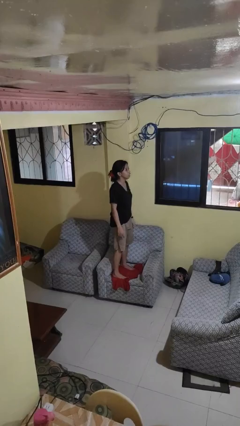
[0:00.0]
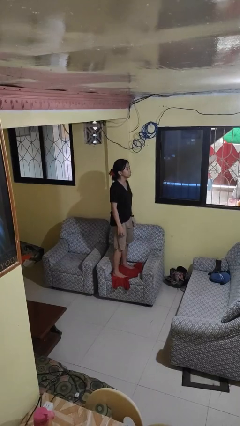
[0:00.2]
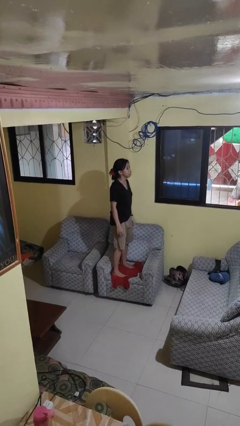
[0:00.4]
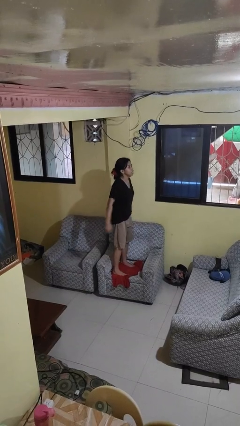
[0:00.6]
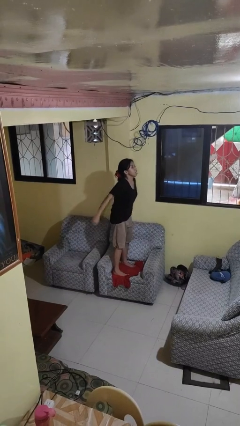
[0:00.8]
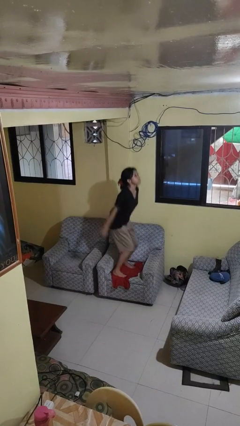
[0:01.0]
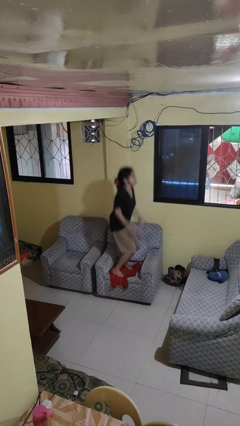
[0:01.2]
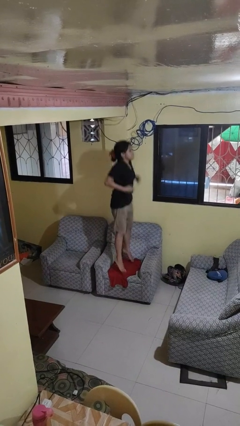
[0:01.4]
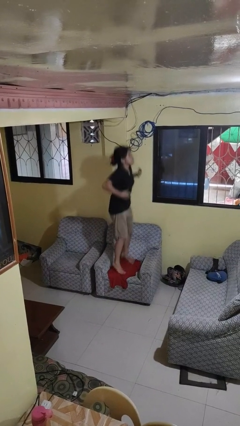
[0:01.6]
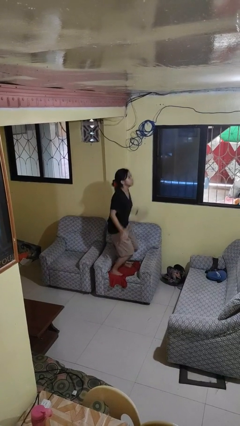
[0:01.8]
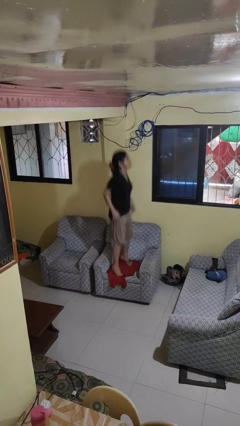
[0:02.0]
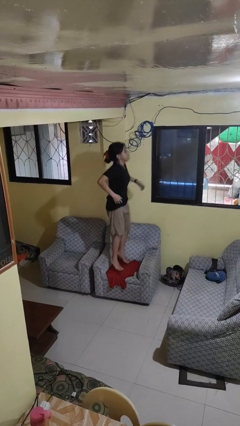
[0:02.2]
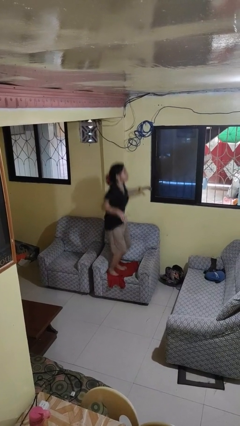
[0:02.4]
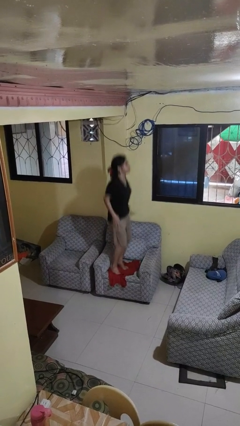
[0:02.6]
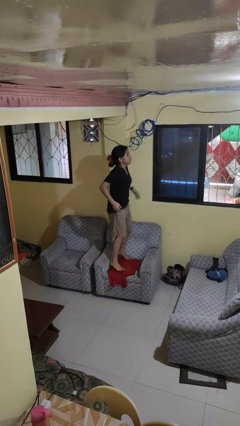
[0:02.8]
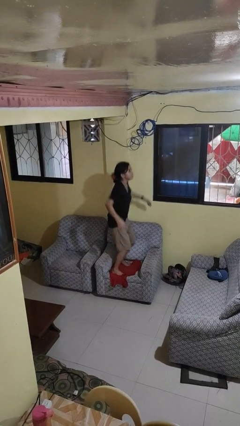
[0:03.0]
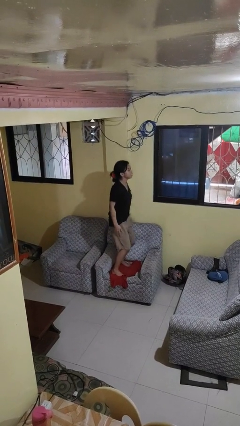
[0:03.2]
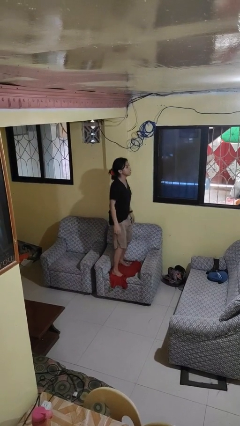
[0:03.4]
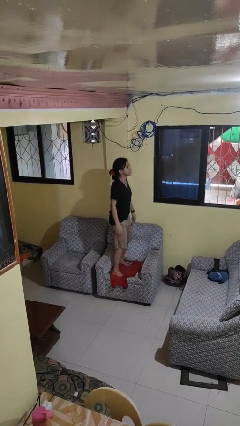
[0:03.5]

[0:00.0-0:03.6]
person jumps on couch

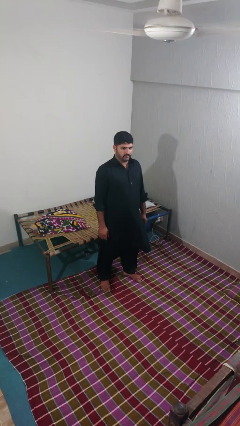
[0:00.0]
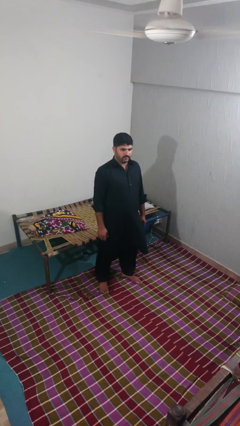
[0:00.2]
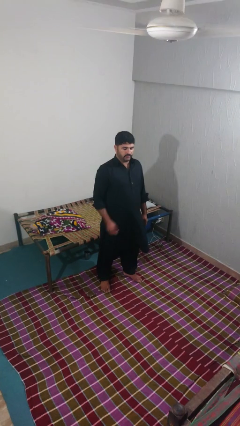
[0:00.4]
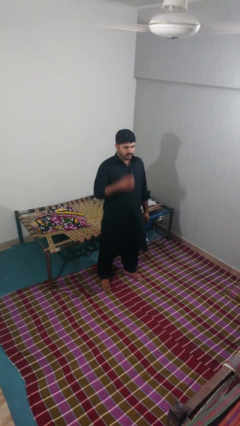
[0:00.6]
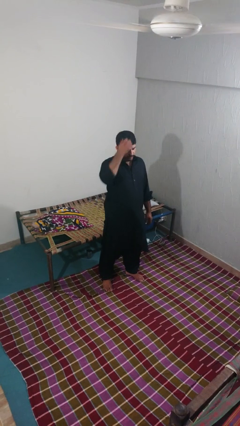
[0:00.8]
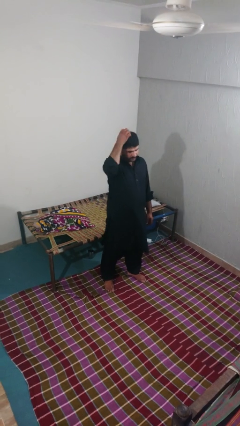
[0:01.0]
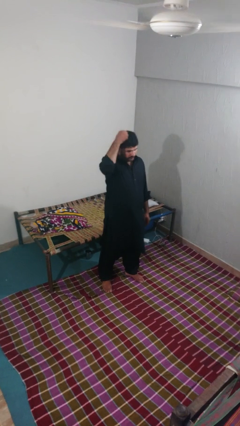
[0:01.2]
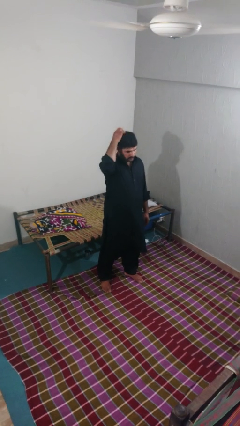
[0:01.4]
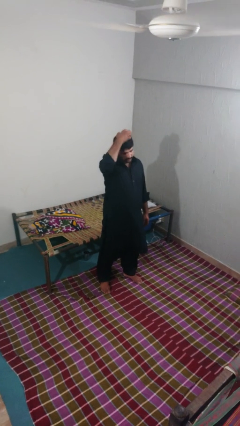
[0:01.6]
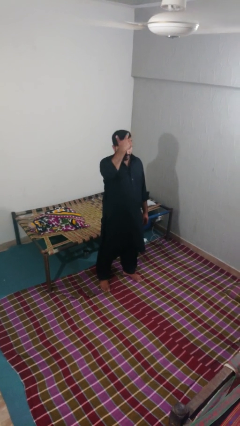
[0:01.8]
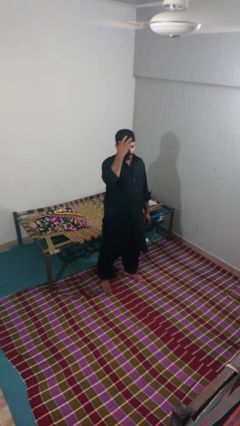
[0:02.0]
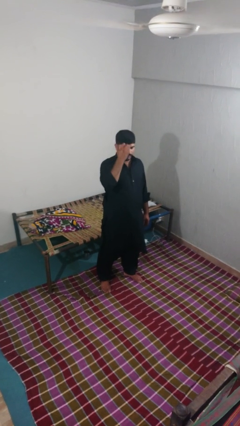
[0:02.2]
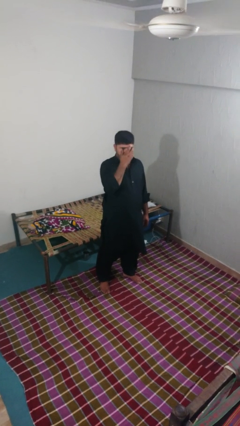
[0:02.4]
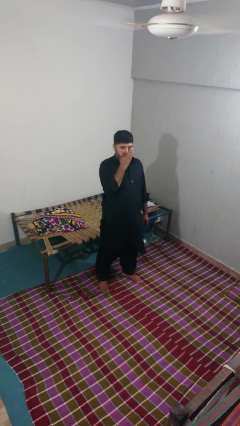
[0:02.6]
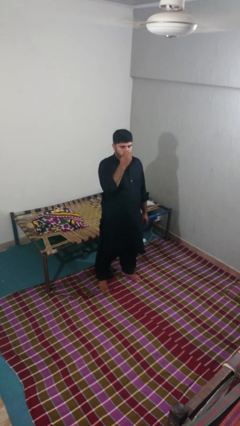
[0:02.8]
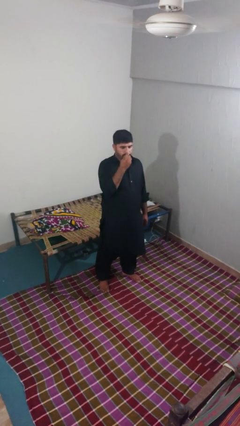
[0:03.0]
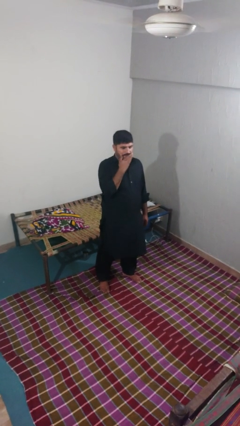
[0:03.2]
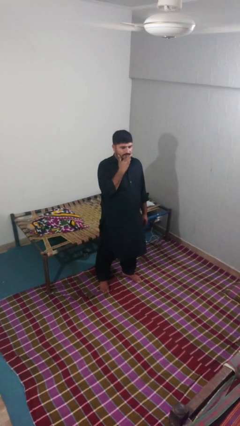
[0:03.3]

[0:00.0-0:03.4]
person scratches face

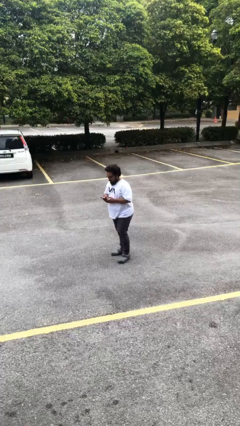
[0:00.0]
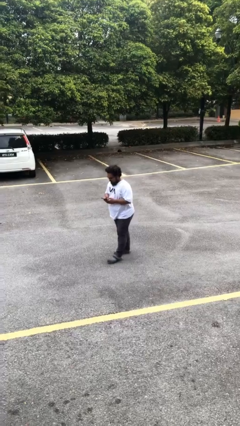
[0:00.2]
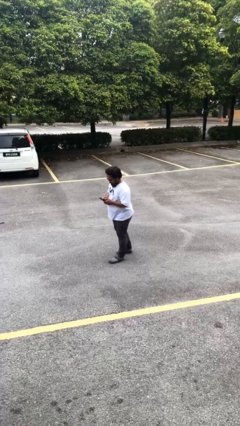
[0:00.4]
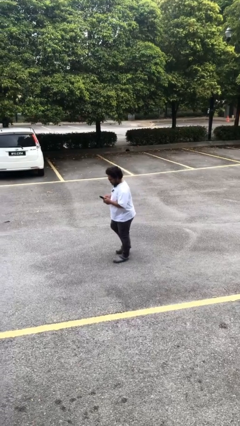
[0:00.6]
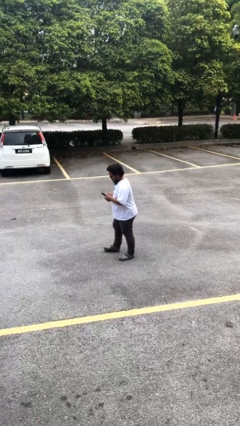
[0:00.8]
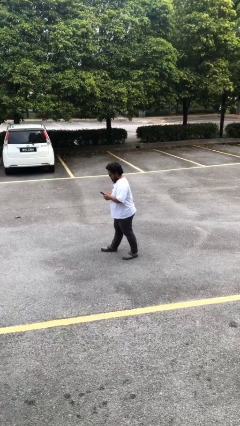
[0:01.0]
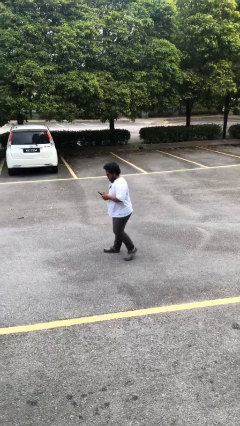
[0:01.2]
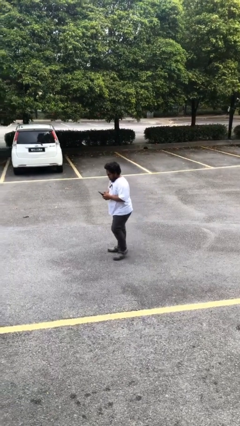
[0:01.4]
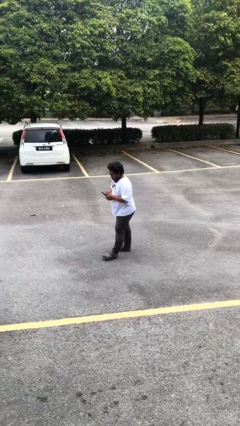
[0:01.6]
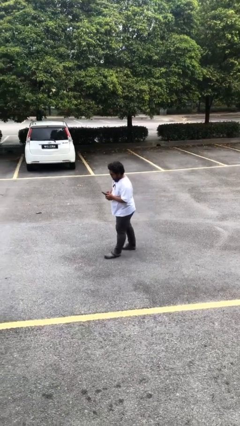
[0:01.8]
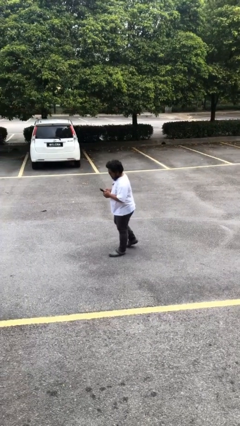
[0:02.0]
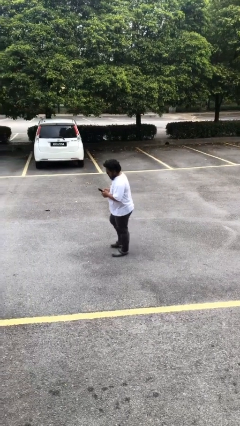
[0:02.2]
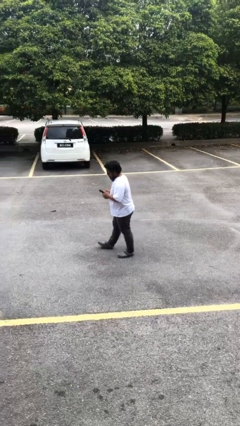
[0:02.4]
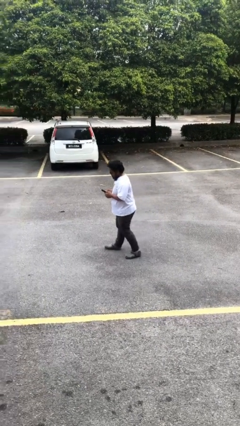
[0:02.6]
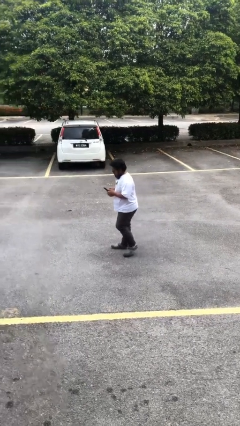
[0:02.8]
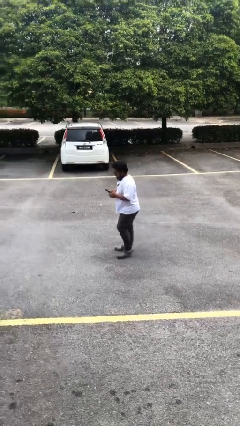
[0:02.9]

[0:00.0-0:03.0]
person texts on phone

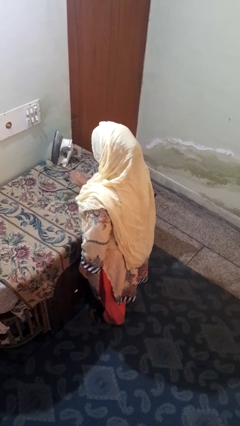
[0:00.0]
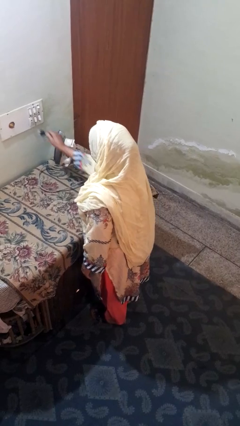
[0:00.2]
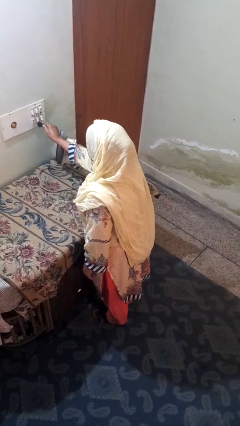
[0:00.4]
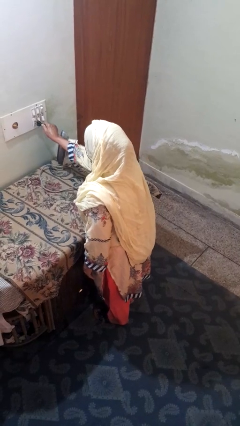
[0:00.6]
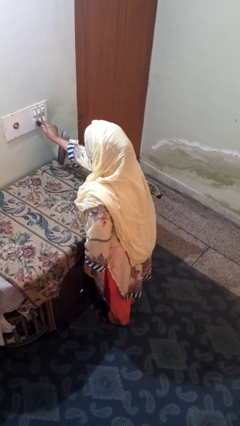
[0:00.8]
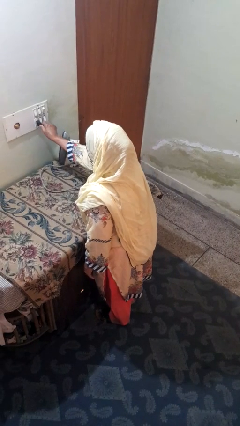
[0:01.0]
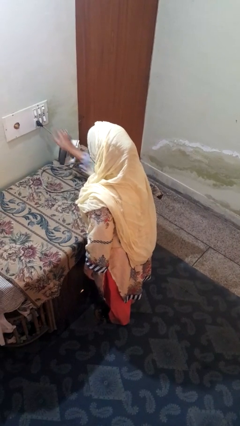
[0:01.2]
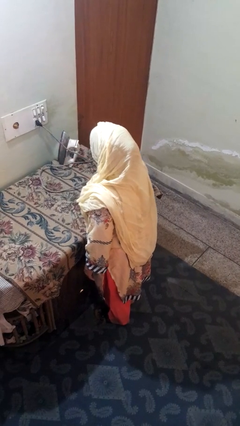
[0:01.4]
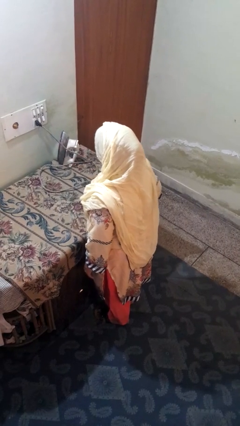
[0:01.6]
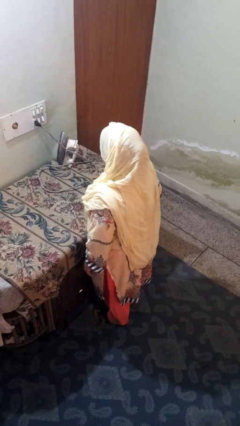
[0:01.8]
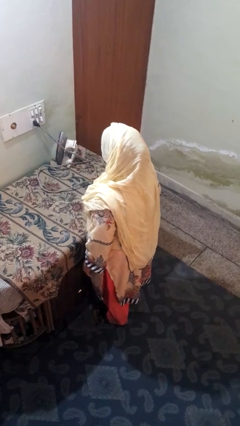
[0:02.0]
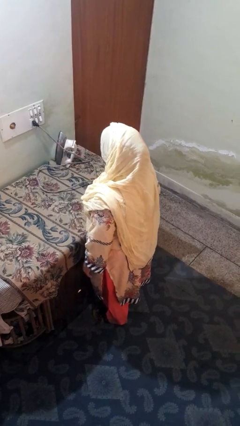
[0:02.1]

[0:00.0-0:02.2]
person plugs into electrical socket

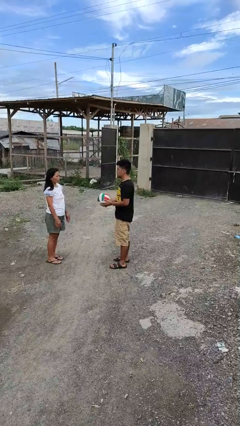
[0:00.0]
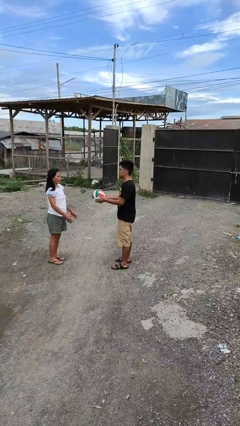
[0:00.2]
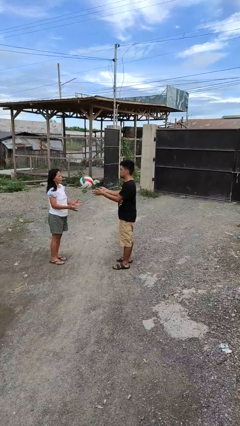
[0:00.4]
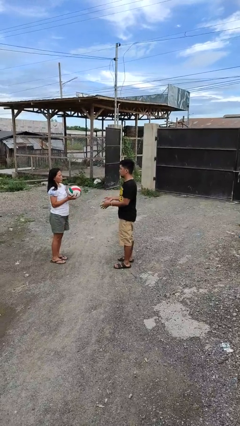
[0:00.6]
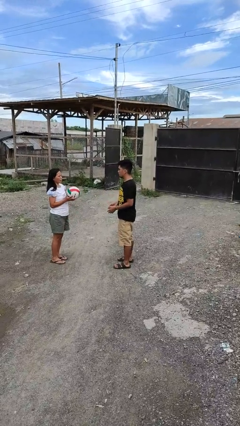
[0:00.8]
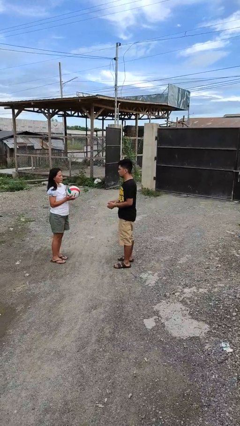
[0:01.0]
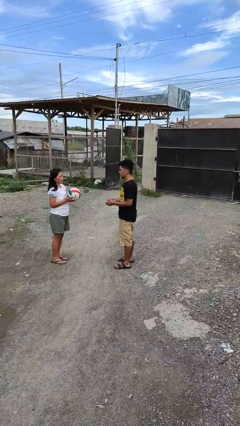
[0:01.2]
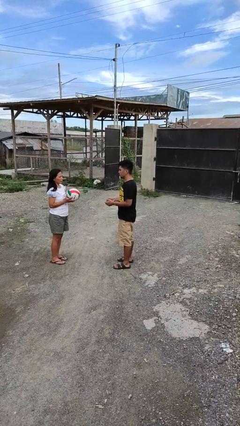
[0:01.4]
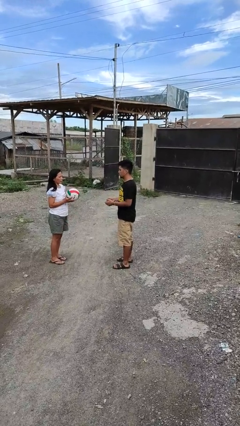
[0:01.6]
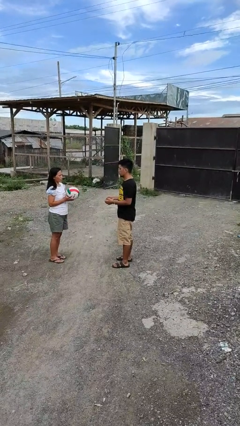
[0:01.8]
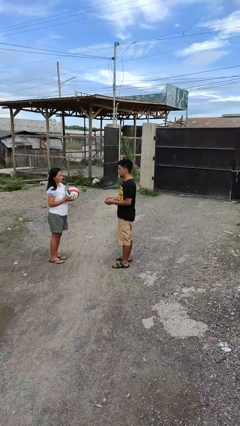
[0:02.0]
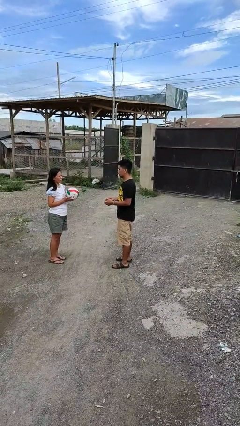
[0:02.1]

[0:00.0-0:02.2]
person throws object to person

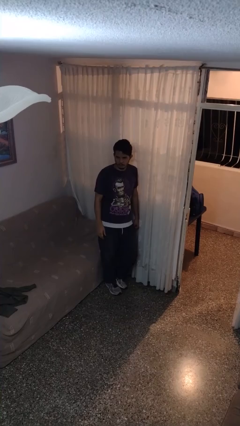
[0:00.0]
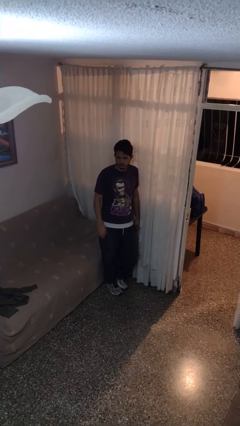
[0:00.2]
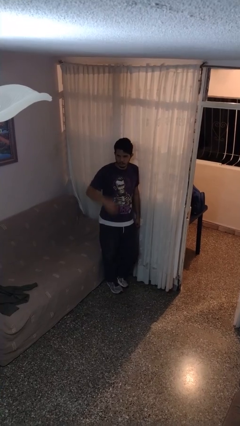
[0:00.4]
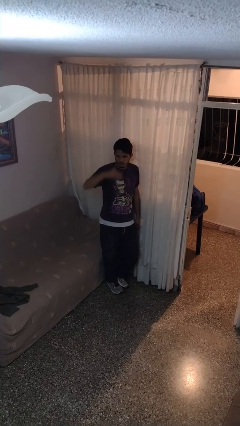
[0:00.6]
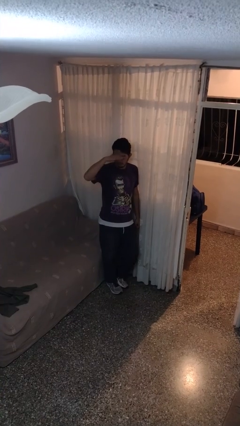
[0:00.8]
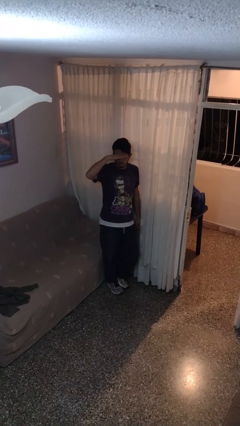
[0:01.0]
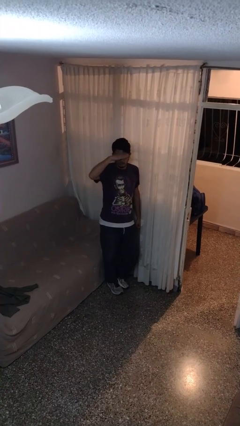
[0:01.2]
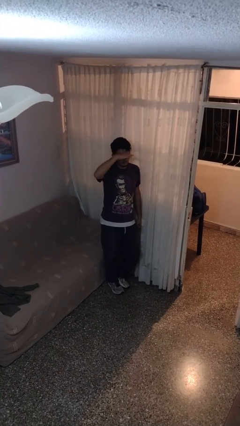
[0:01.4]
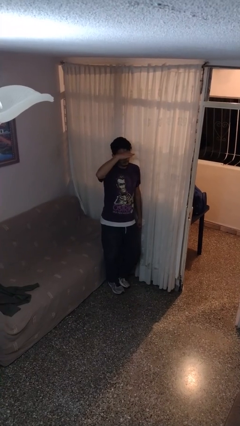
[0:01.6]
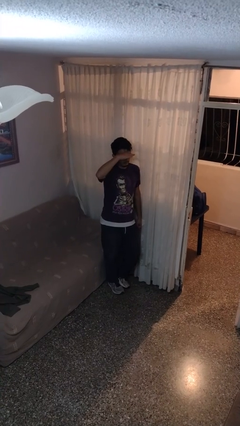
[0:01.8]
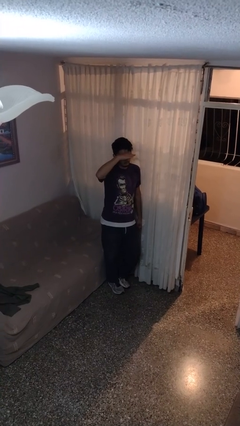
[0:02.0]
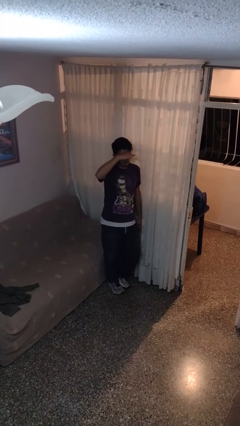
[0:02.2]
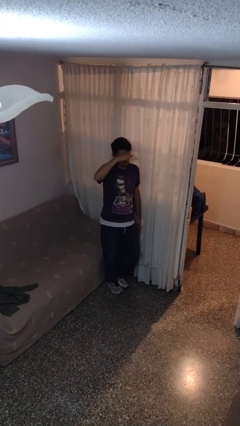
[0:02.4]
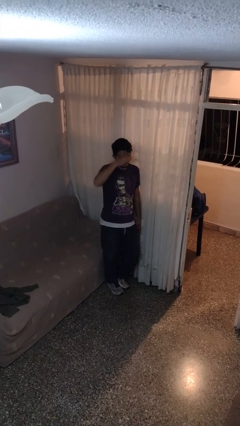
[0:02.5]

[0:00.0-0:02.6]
person shades eyes

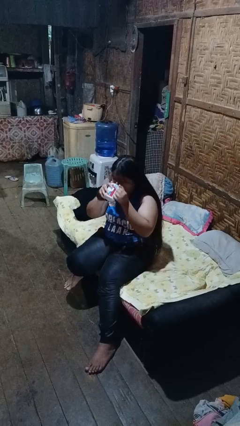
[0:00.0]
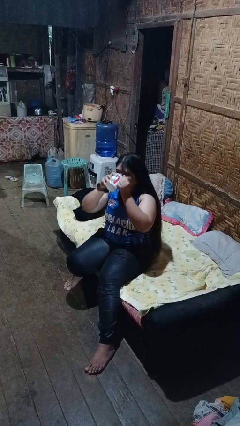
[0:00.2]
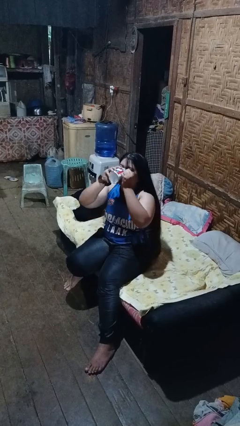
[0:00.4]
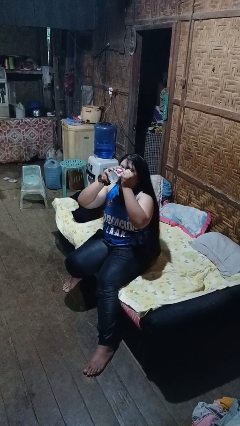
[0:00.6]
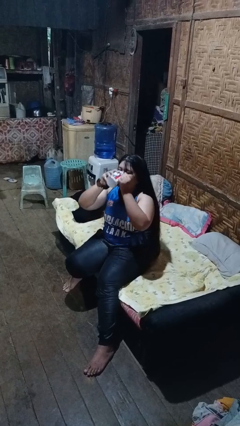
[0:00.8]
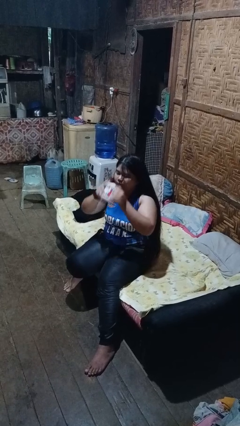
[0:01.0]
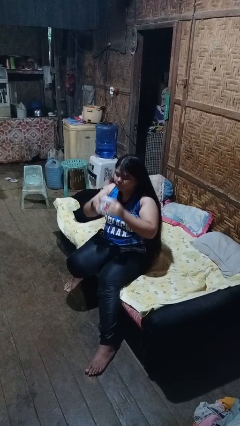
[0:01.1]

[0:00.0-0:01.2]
person drinks from mug
